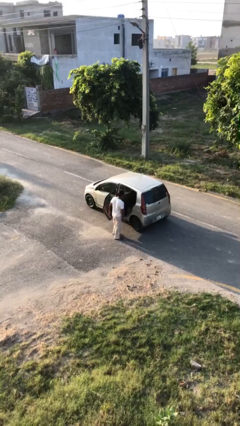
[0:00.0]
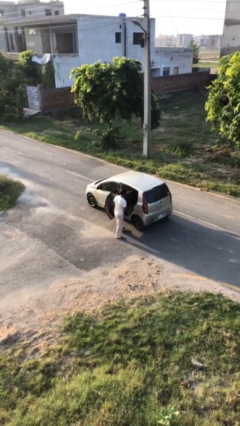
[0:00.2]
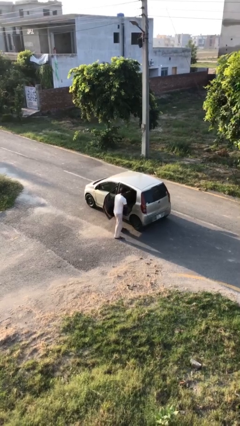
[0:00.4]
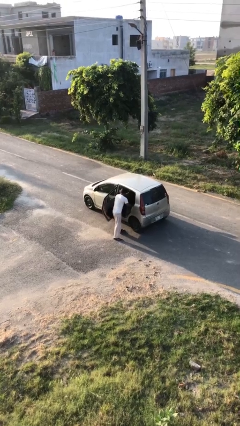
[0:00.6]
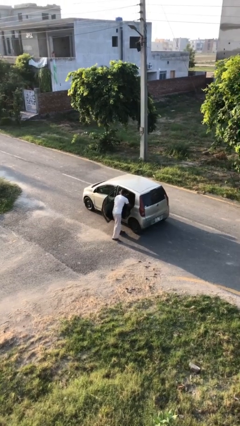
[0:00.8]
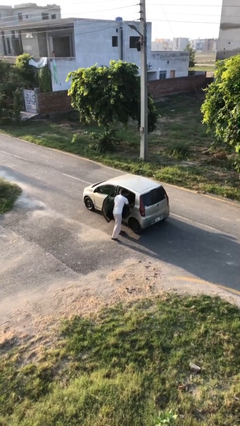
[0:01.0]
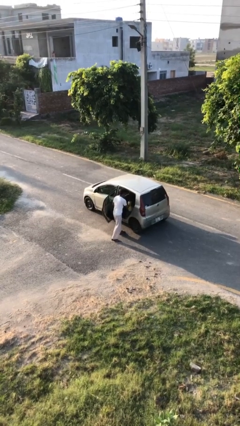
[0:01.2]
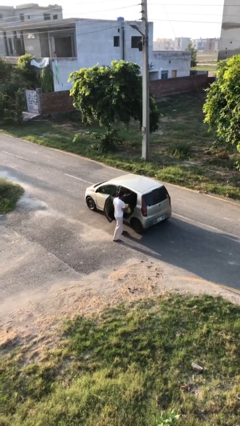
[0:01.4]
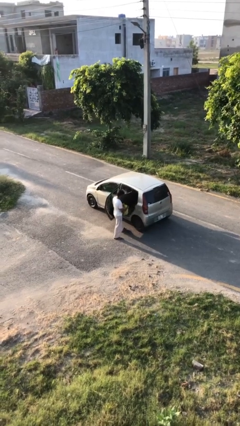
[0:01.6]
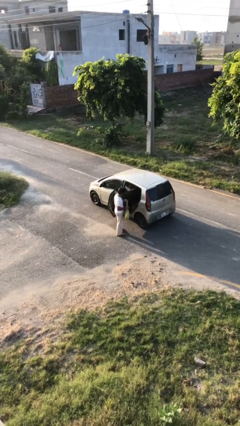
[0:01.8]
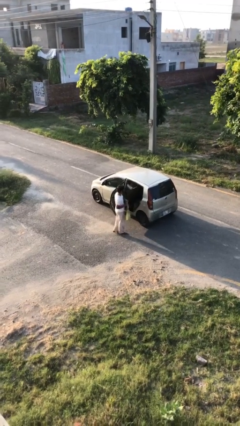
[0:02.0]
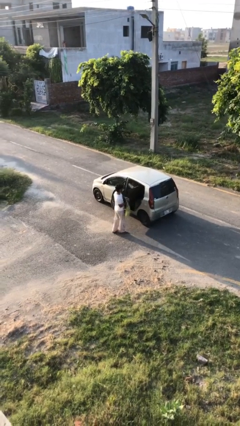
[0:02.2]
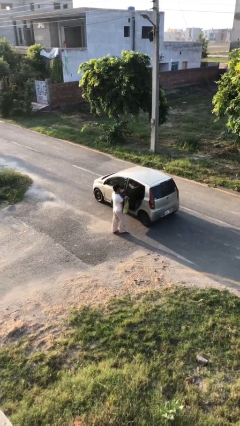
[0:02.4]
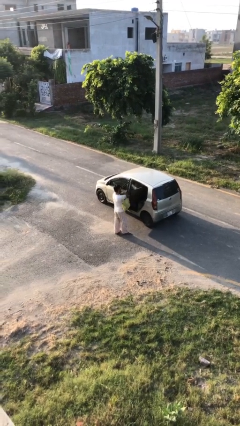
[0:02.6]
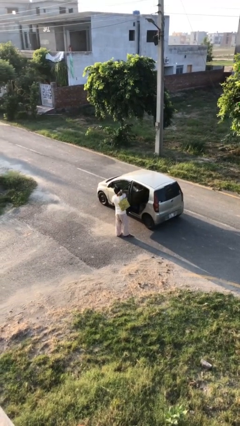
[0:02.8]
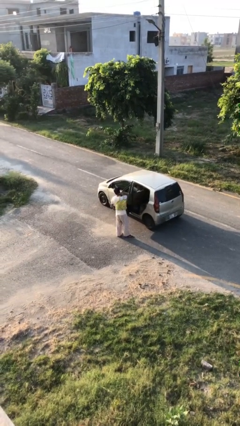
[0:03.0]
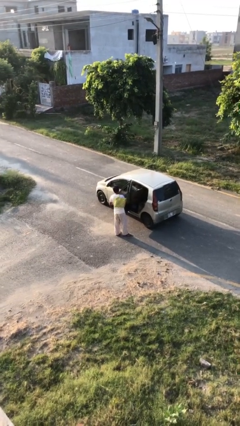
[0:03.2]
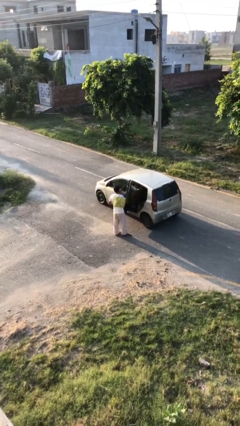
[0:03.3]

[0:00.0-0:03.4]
person unloads car

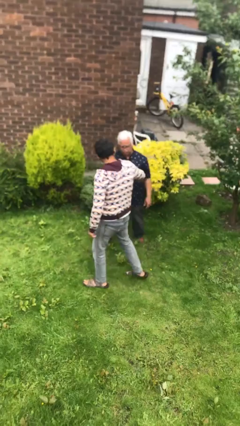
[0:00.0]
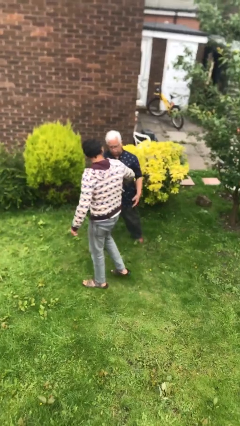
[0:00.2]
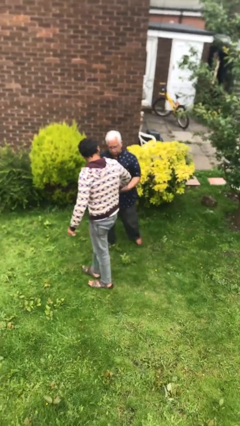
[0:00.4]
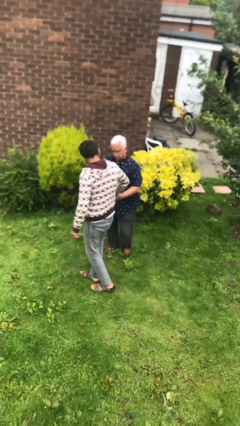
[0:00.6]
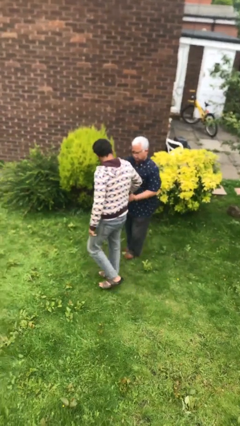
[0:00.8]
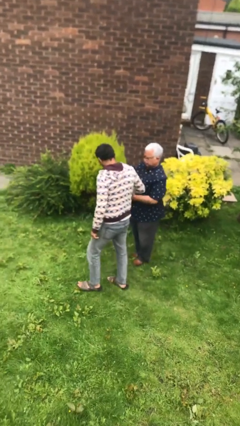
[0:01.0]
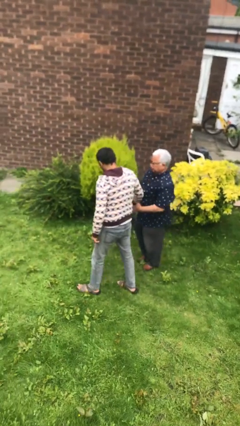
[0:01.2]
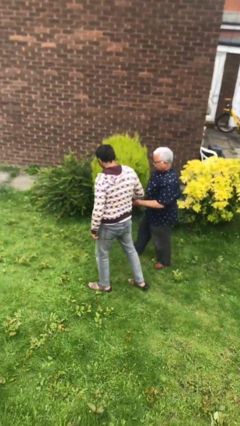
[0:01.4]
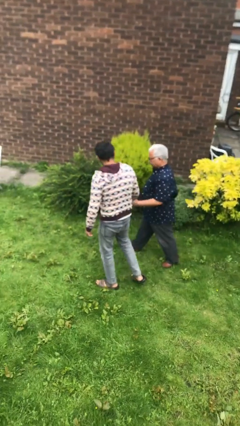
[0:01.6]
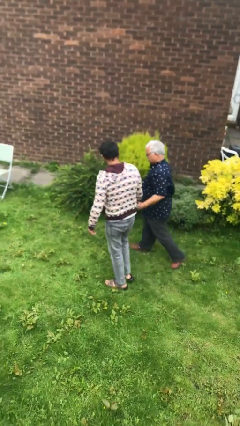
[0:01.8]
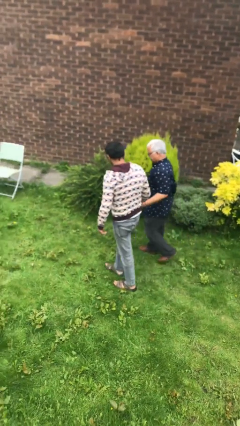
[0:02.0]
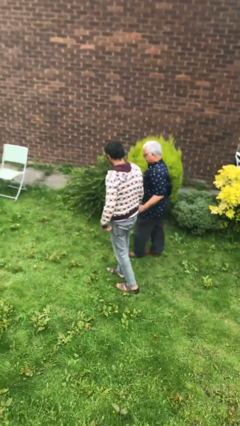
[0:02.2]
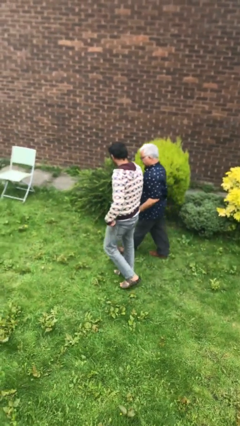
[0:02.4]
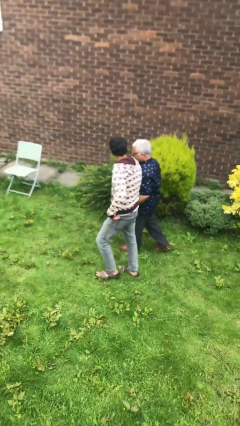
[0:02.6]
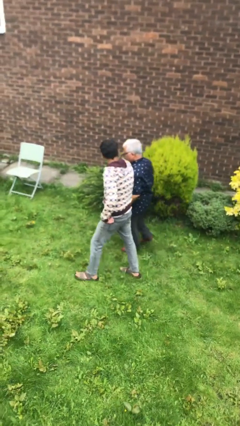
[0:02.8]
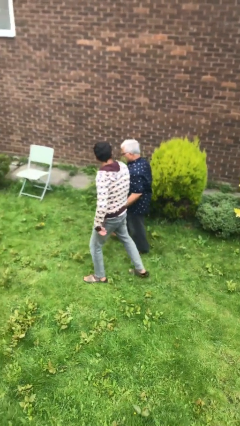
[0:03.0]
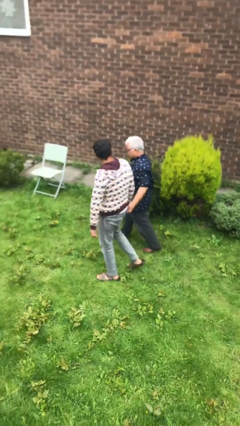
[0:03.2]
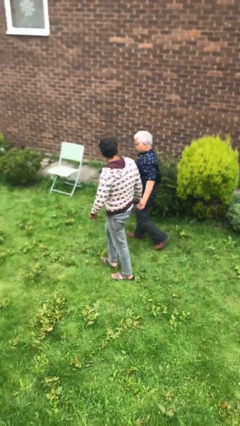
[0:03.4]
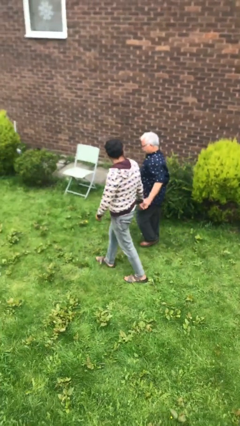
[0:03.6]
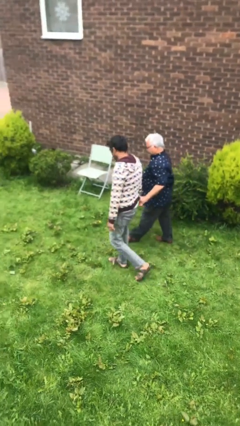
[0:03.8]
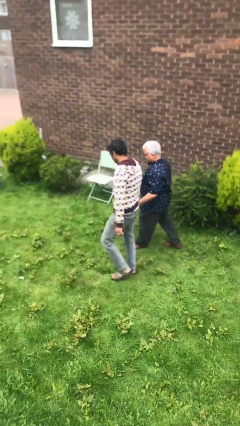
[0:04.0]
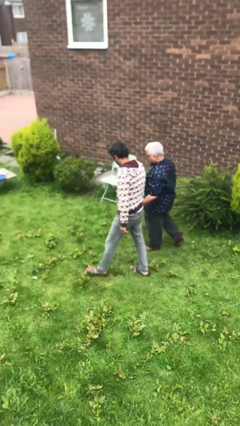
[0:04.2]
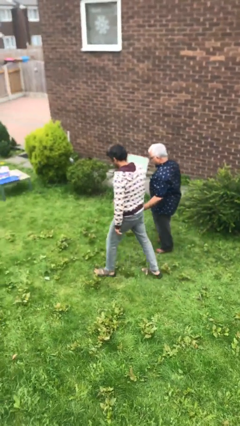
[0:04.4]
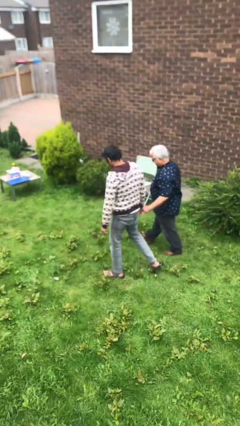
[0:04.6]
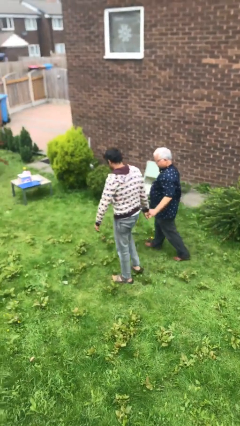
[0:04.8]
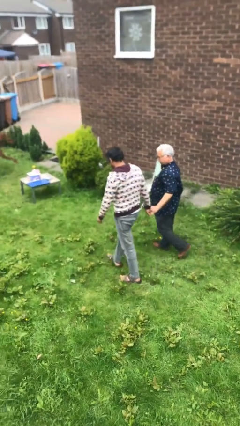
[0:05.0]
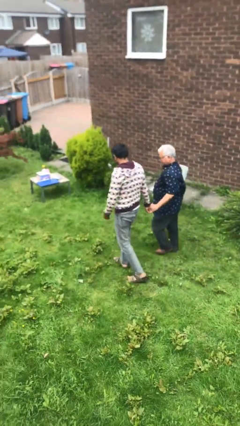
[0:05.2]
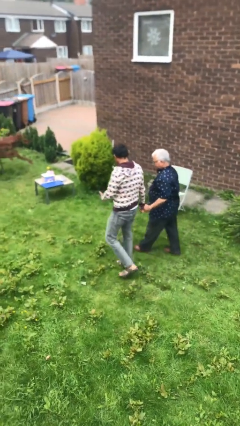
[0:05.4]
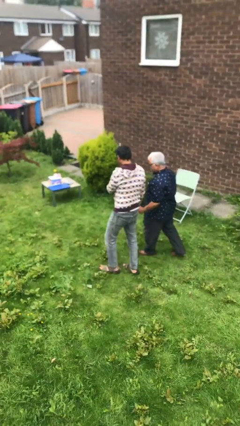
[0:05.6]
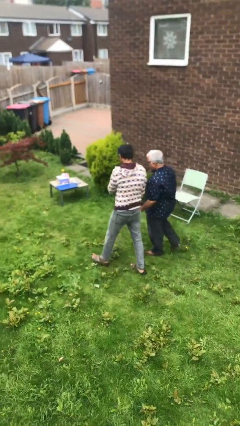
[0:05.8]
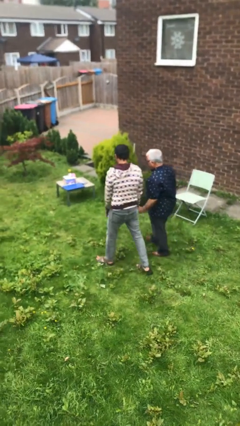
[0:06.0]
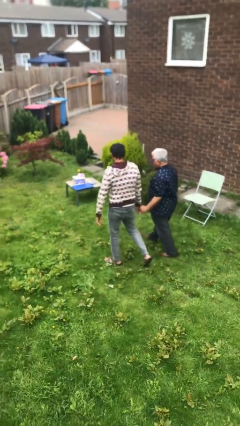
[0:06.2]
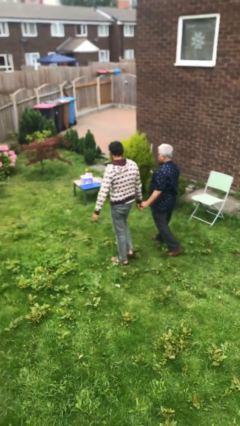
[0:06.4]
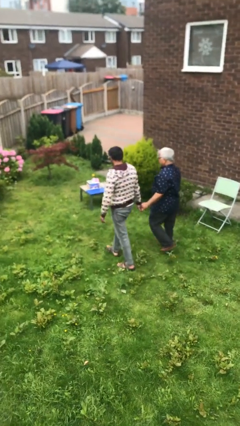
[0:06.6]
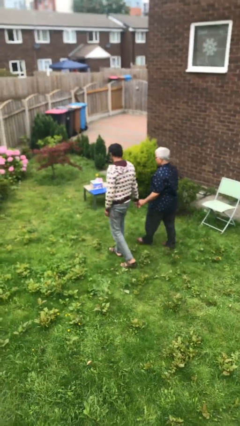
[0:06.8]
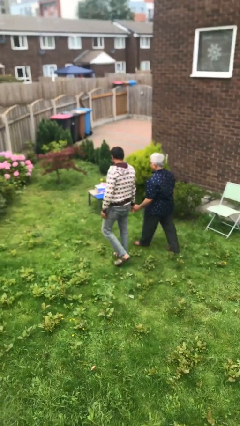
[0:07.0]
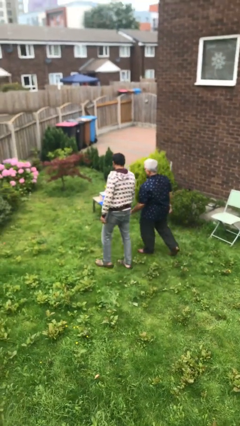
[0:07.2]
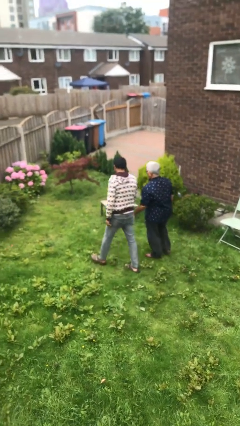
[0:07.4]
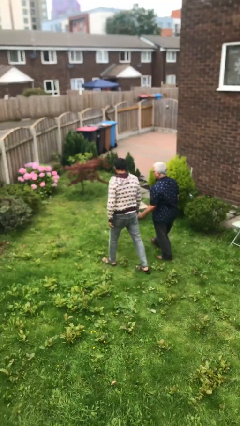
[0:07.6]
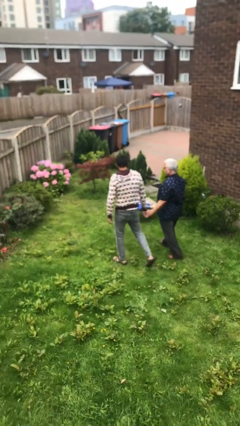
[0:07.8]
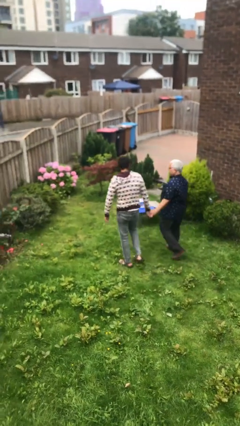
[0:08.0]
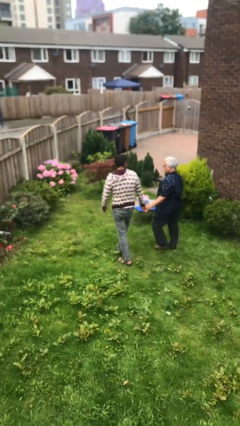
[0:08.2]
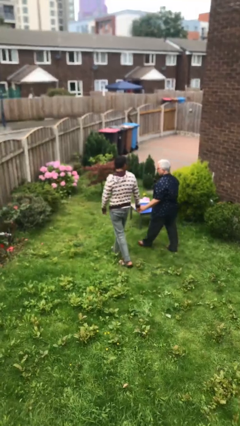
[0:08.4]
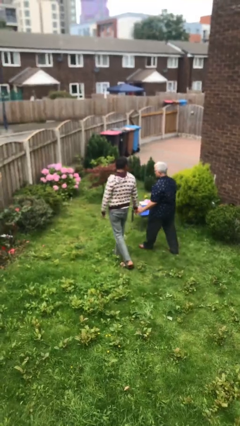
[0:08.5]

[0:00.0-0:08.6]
person holds hand

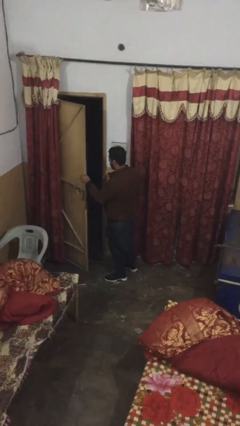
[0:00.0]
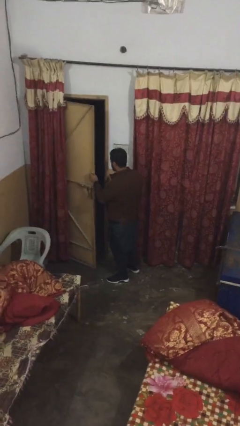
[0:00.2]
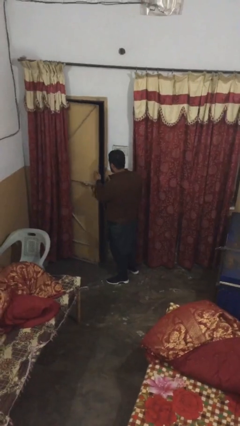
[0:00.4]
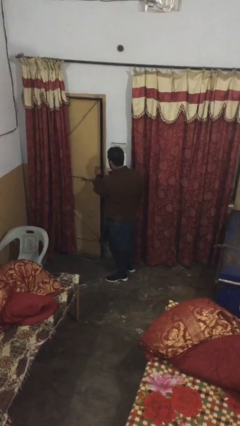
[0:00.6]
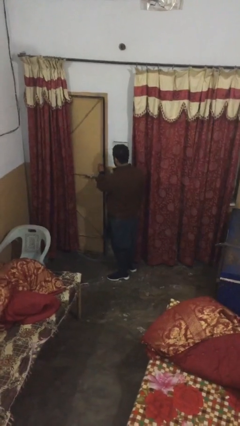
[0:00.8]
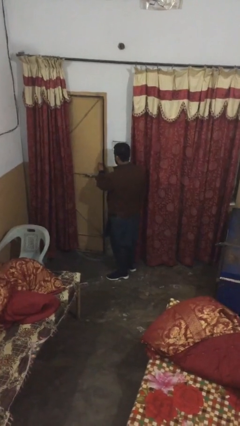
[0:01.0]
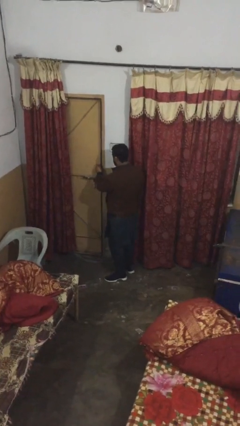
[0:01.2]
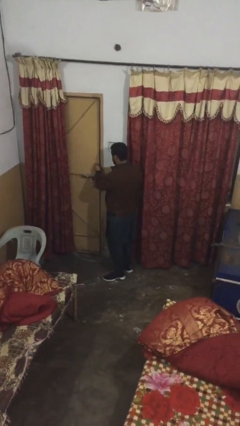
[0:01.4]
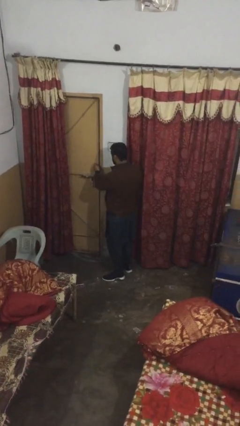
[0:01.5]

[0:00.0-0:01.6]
person closes facility door

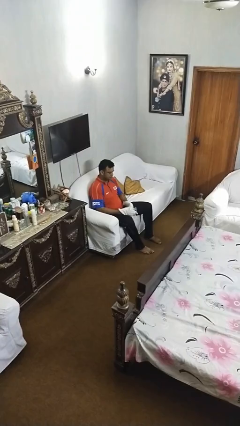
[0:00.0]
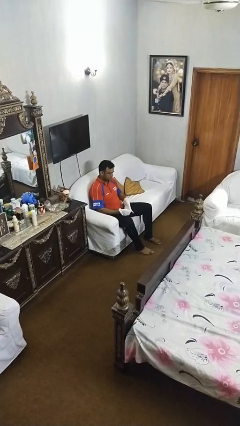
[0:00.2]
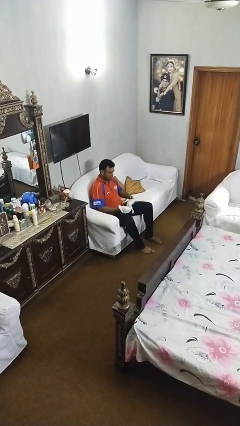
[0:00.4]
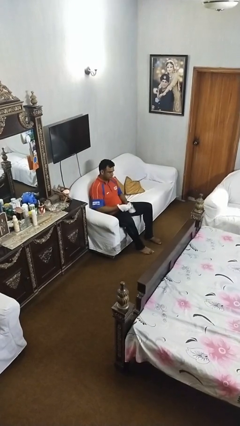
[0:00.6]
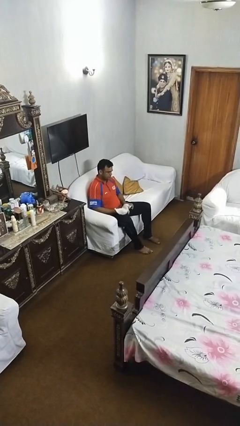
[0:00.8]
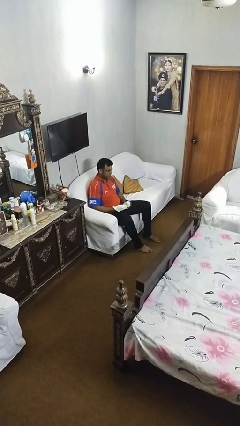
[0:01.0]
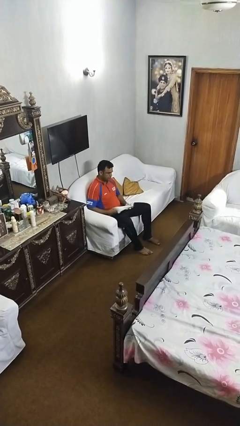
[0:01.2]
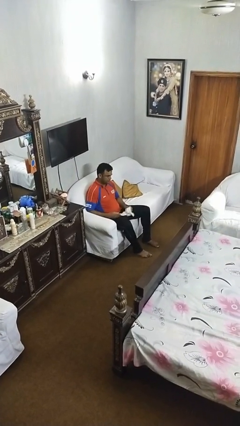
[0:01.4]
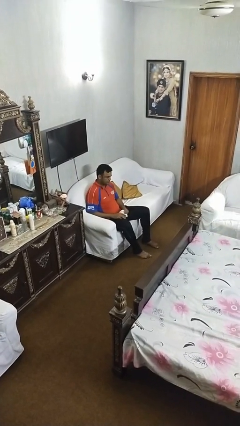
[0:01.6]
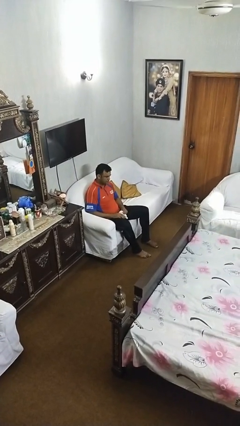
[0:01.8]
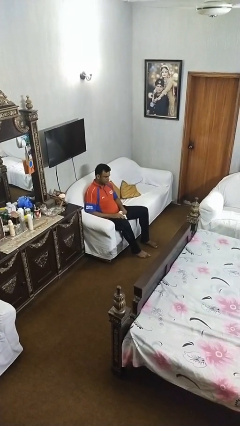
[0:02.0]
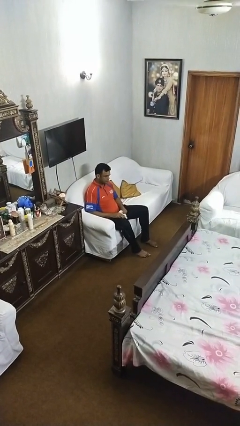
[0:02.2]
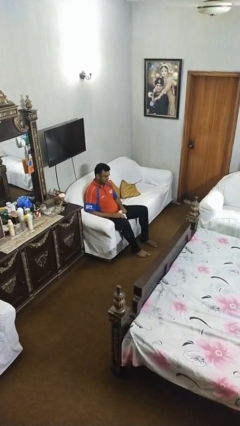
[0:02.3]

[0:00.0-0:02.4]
person takes off gloves

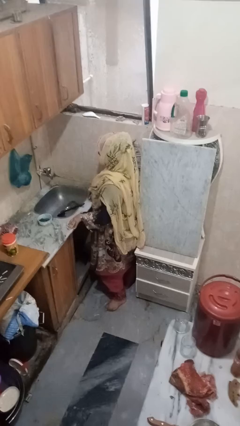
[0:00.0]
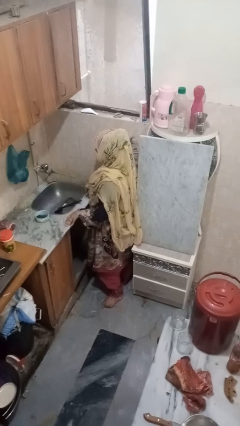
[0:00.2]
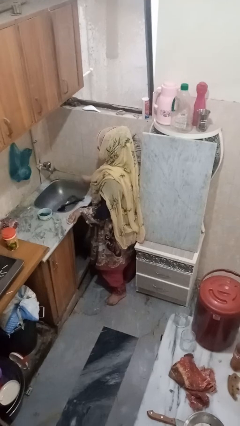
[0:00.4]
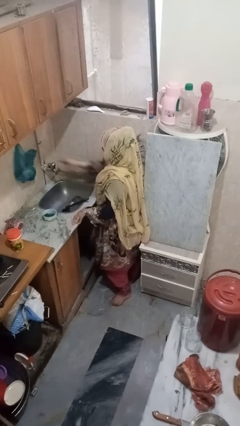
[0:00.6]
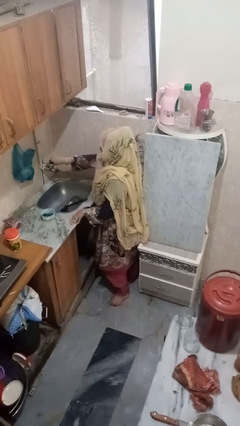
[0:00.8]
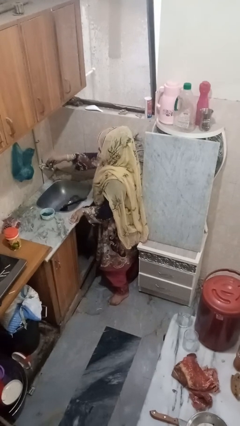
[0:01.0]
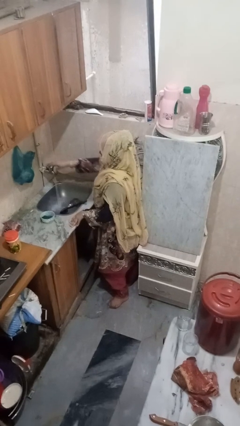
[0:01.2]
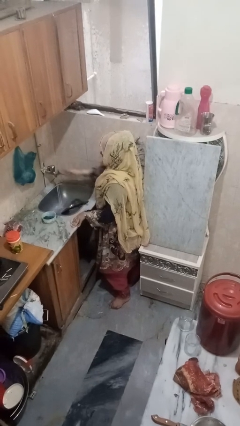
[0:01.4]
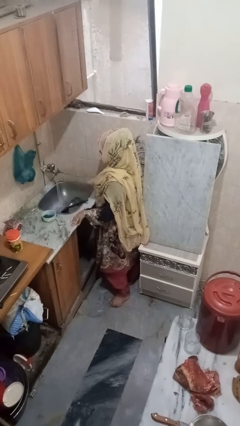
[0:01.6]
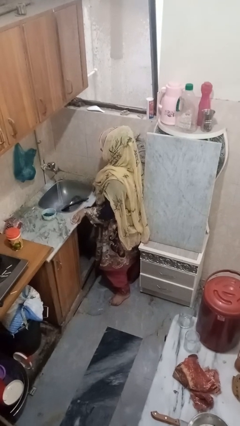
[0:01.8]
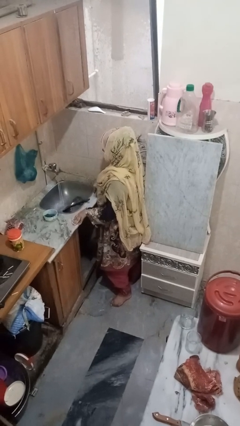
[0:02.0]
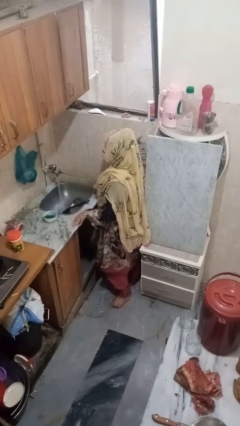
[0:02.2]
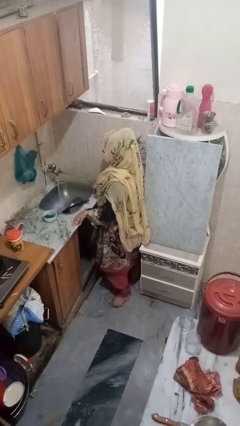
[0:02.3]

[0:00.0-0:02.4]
person turns on faucet
